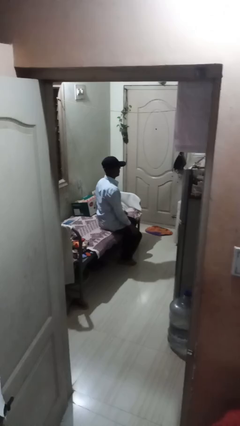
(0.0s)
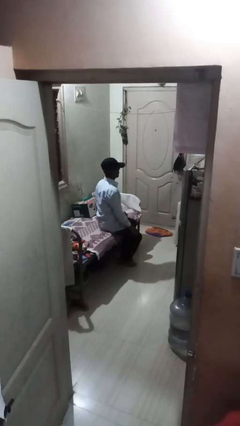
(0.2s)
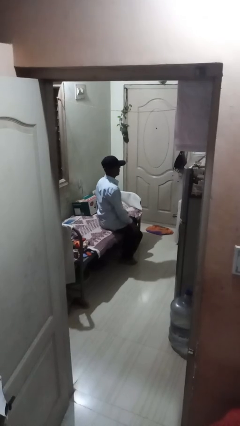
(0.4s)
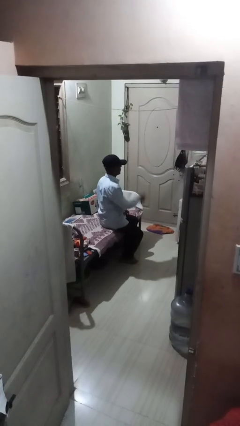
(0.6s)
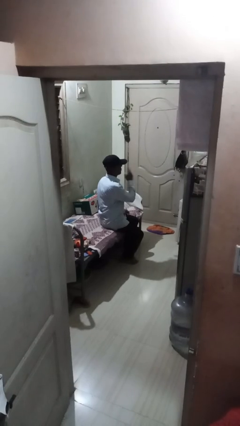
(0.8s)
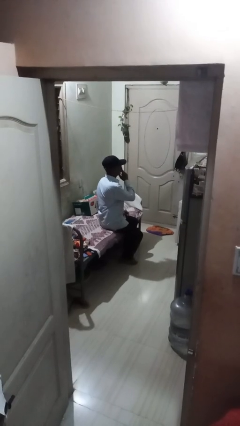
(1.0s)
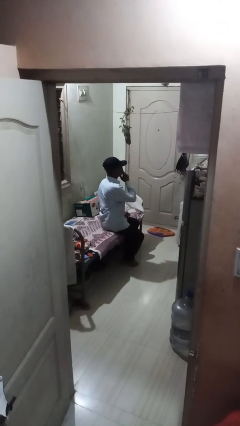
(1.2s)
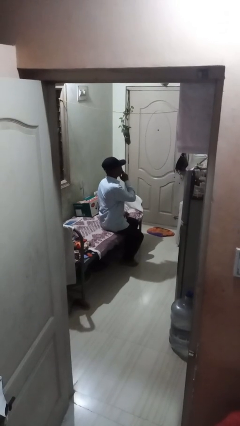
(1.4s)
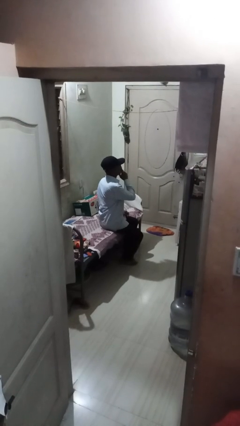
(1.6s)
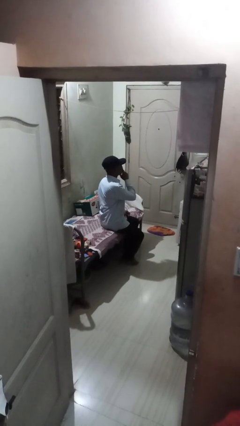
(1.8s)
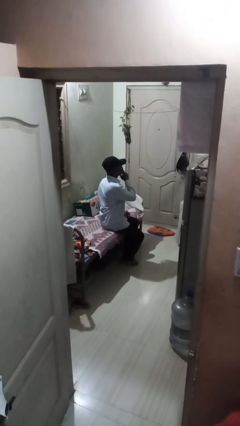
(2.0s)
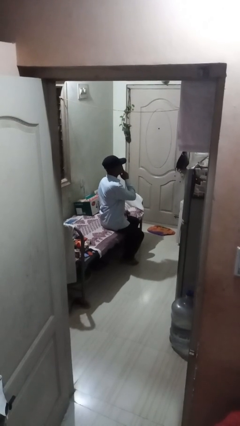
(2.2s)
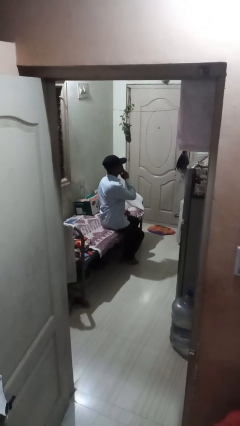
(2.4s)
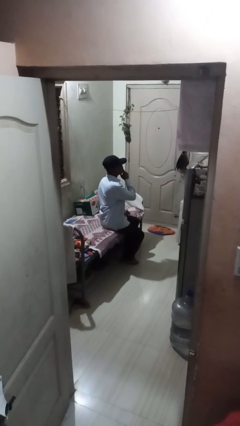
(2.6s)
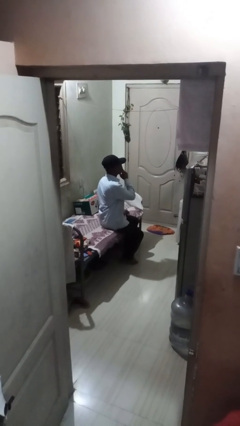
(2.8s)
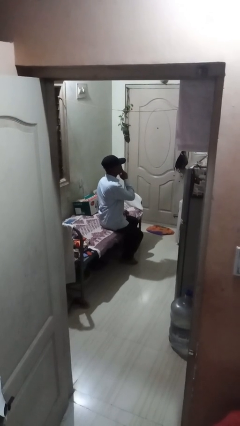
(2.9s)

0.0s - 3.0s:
person gestures be quiet

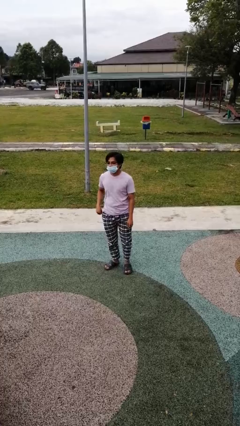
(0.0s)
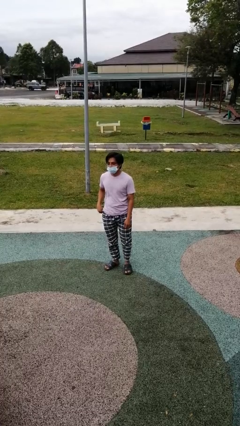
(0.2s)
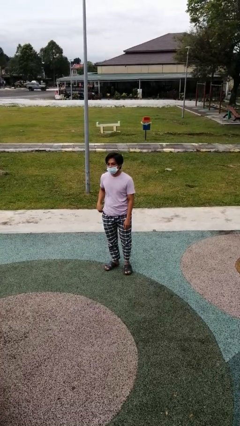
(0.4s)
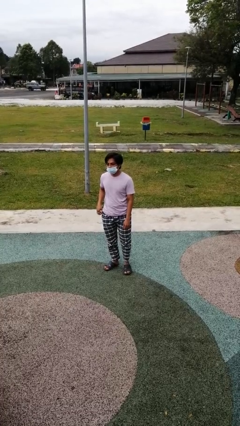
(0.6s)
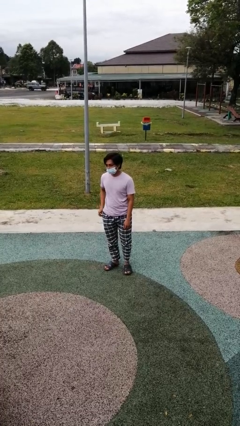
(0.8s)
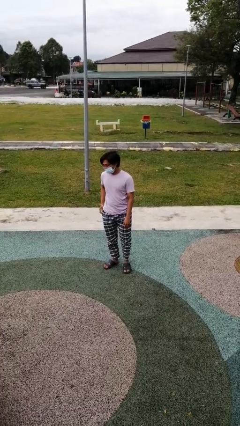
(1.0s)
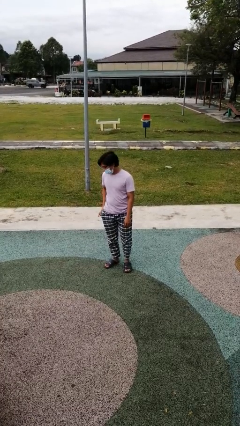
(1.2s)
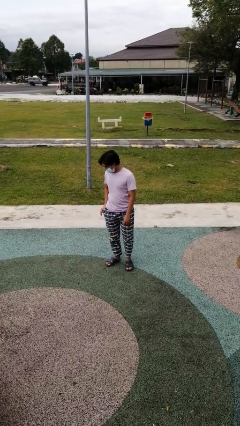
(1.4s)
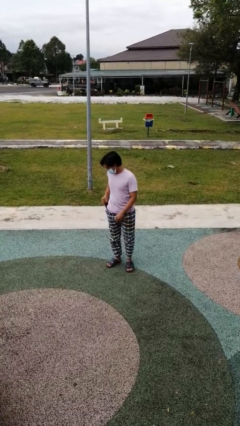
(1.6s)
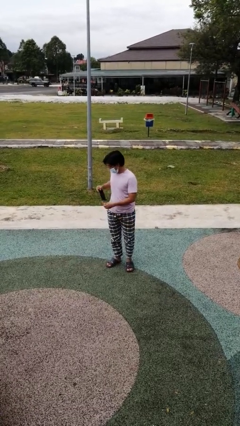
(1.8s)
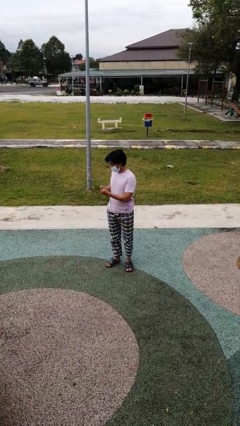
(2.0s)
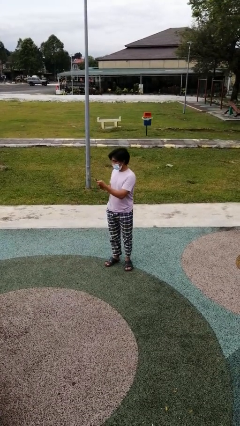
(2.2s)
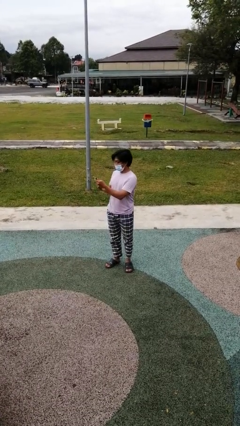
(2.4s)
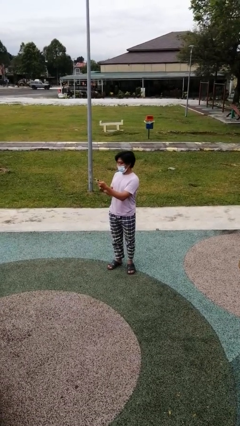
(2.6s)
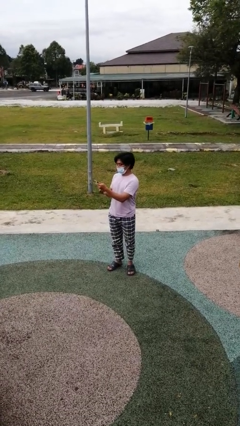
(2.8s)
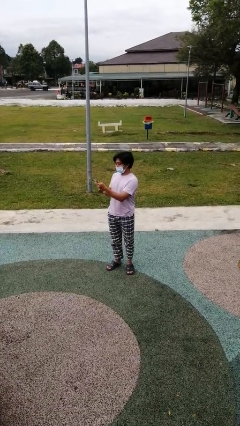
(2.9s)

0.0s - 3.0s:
person takes phone from pocket

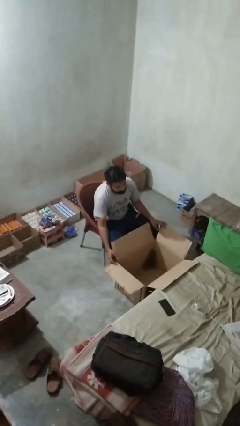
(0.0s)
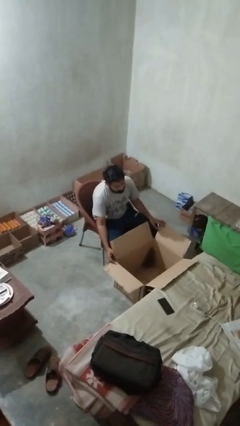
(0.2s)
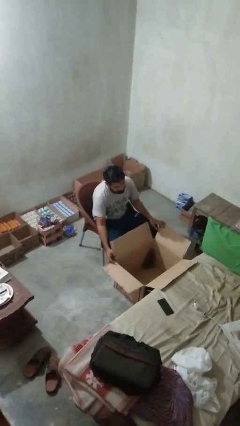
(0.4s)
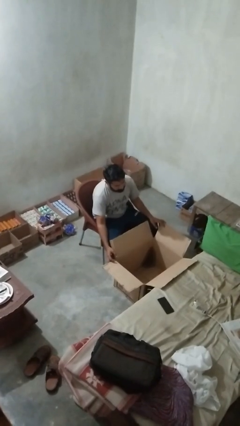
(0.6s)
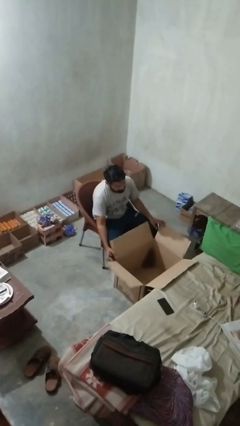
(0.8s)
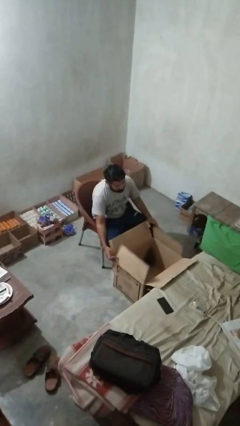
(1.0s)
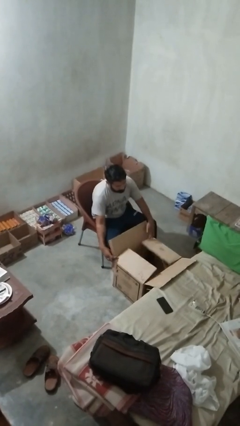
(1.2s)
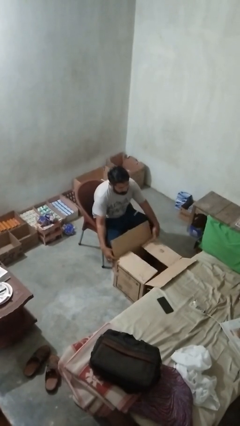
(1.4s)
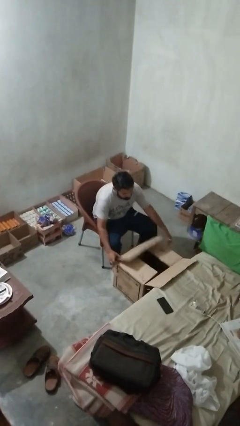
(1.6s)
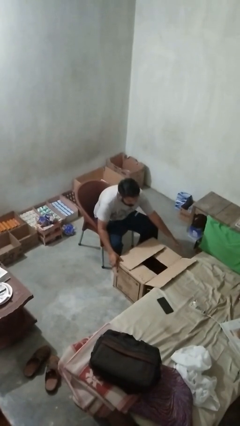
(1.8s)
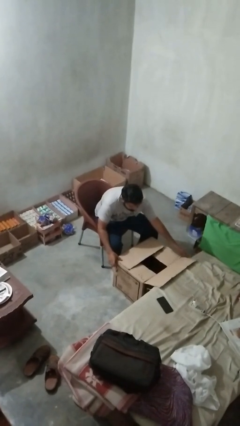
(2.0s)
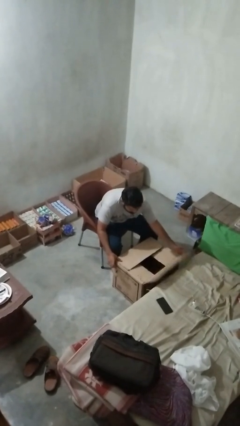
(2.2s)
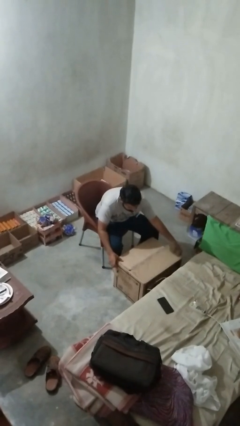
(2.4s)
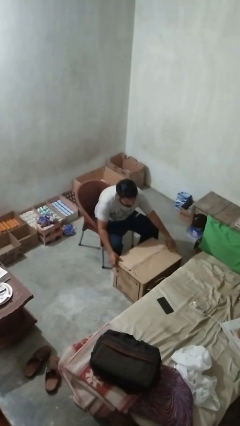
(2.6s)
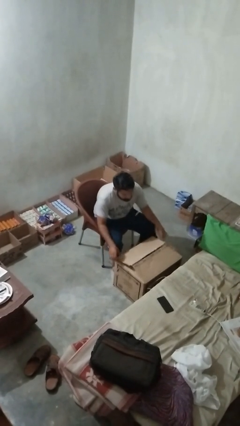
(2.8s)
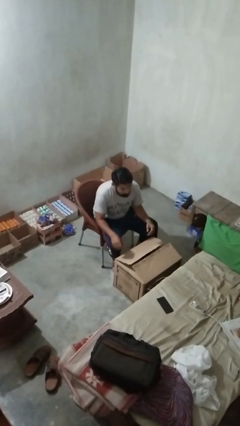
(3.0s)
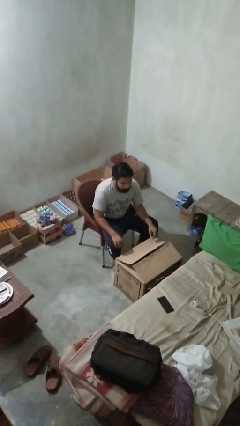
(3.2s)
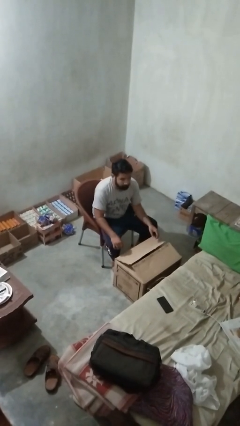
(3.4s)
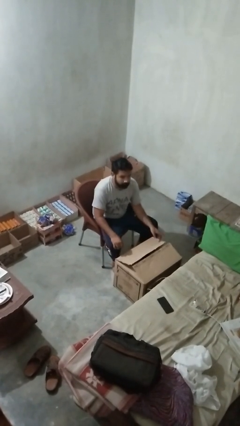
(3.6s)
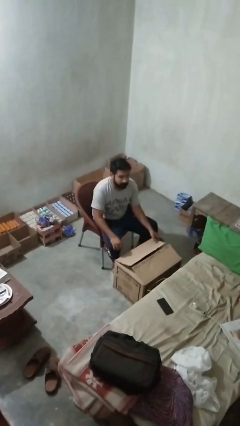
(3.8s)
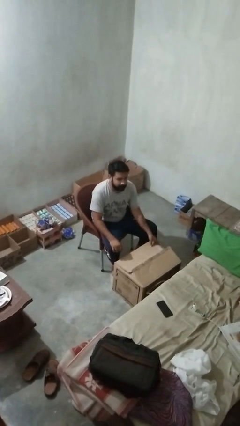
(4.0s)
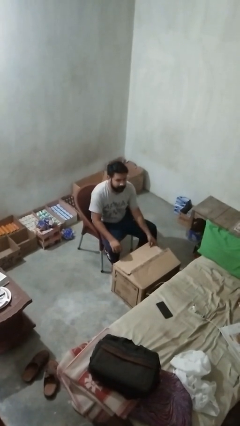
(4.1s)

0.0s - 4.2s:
person closes box

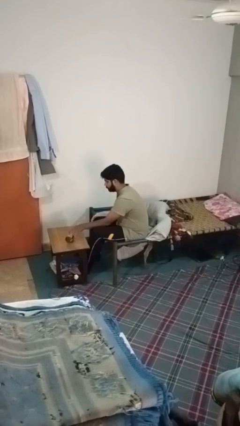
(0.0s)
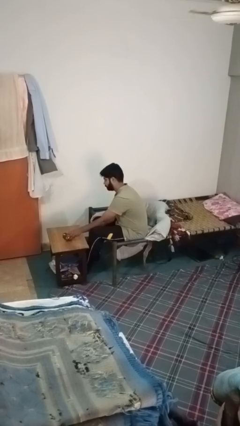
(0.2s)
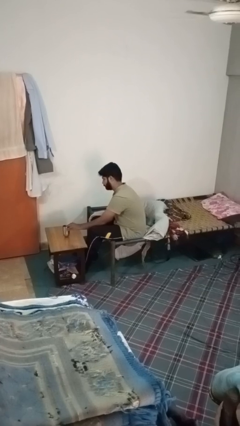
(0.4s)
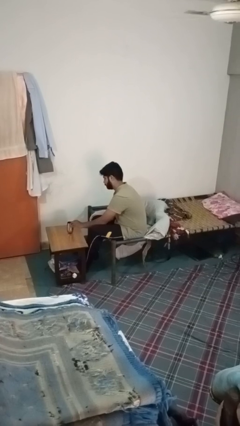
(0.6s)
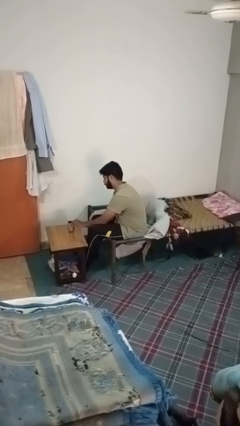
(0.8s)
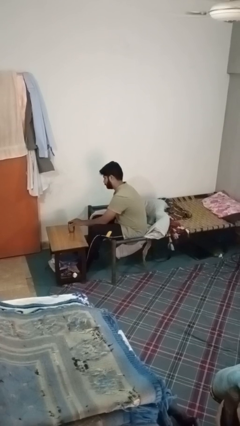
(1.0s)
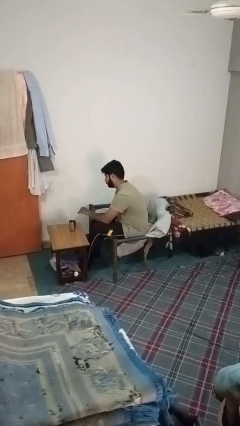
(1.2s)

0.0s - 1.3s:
person sets upright glass

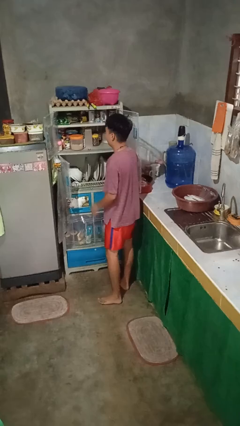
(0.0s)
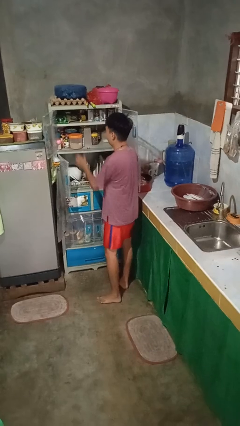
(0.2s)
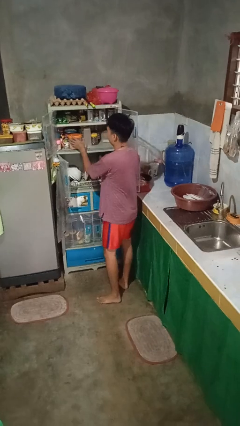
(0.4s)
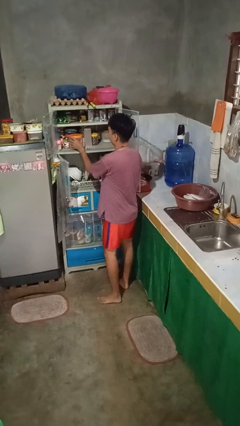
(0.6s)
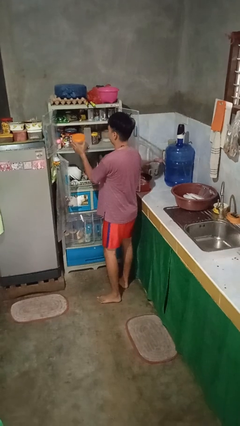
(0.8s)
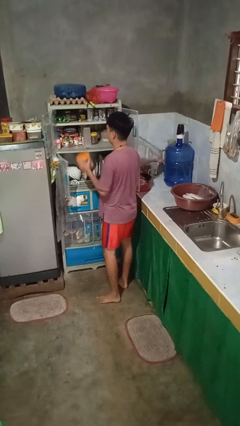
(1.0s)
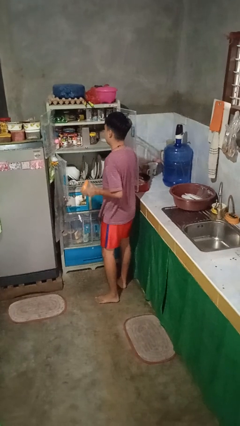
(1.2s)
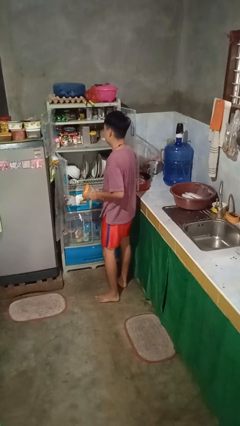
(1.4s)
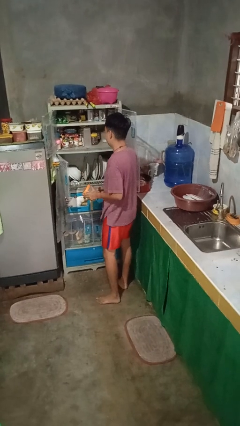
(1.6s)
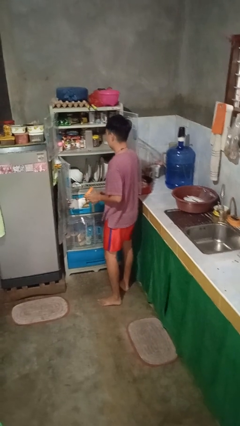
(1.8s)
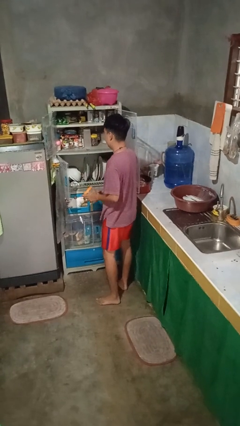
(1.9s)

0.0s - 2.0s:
person takes object from cabinet

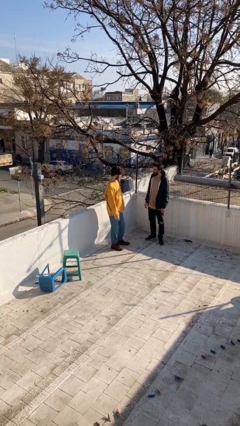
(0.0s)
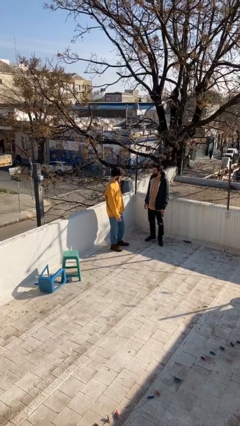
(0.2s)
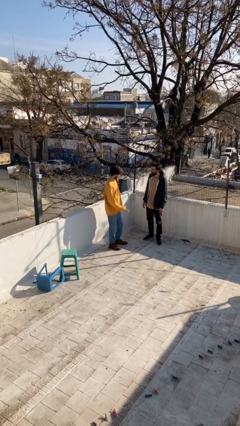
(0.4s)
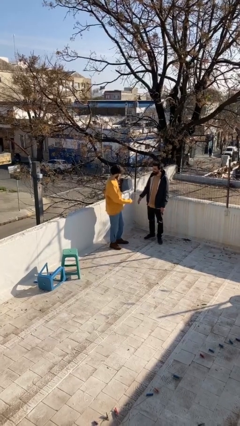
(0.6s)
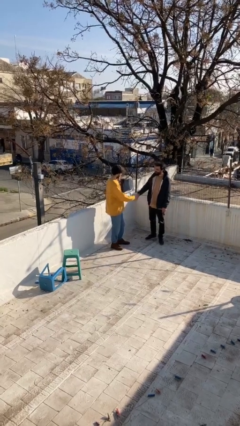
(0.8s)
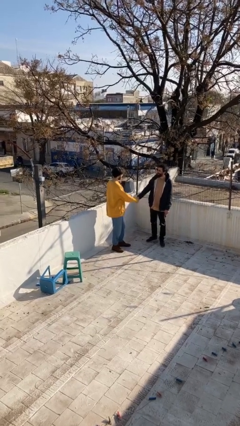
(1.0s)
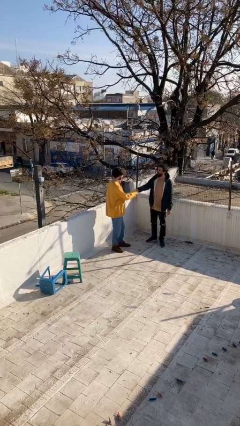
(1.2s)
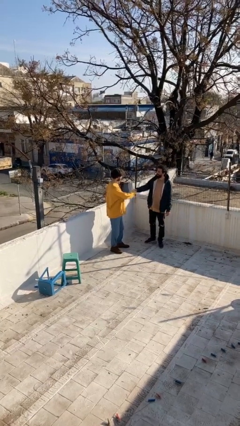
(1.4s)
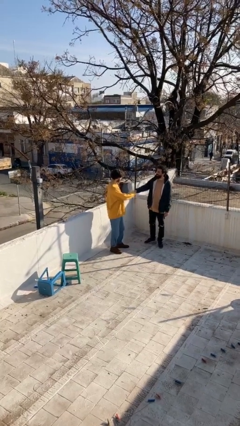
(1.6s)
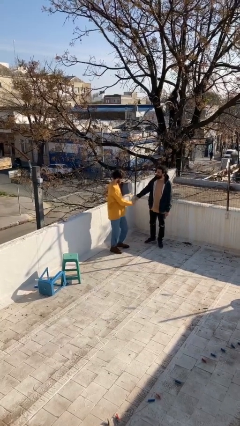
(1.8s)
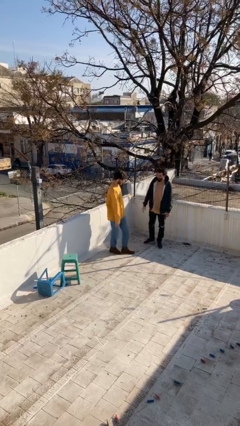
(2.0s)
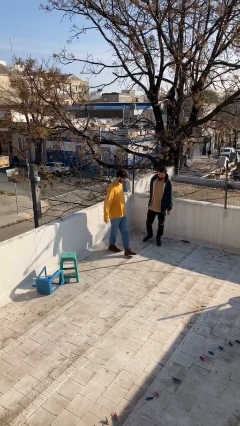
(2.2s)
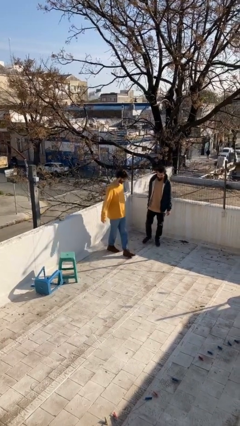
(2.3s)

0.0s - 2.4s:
person shakes hand

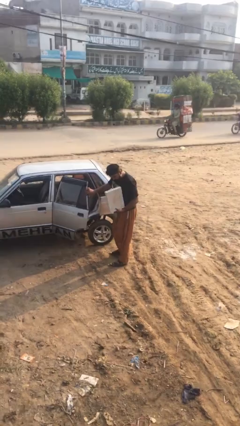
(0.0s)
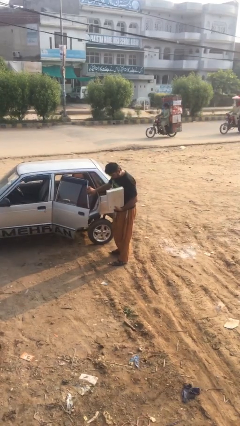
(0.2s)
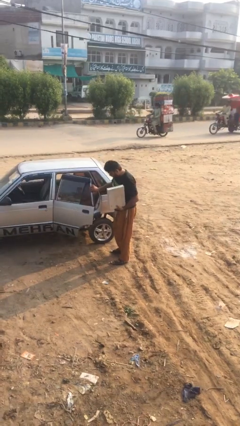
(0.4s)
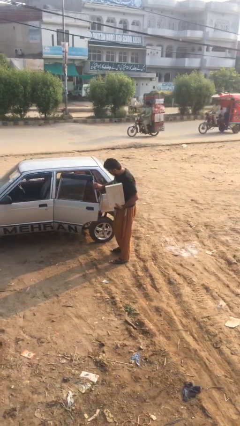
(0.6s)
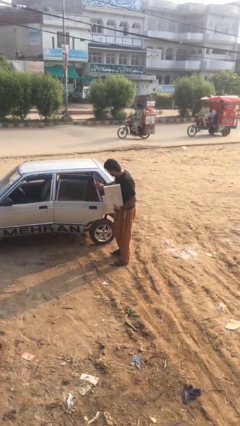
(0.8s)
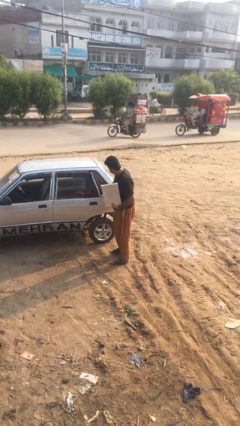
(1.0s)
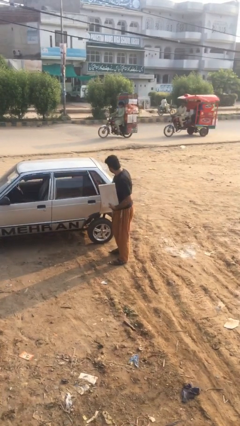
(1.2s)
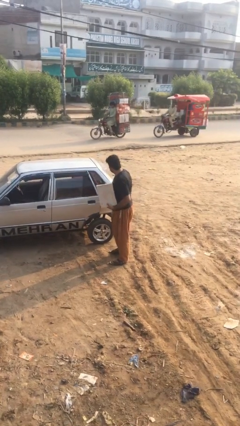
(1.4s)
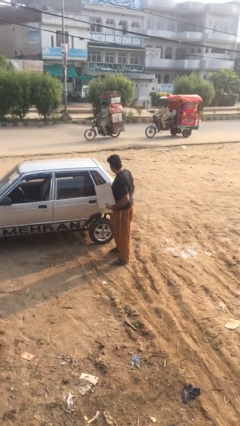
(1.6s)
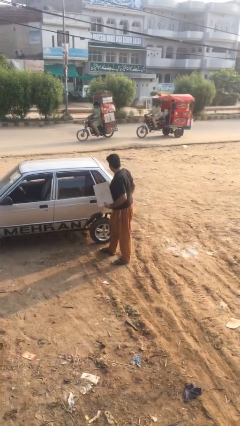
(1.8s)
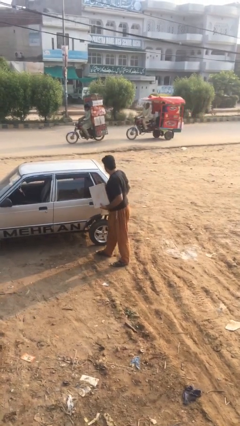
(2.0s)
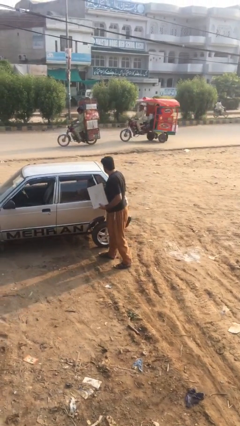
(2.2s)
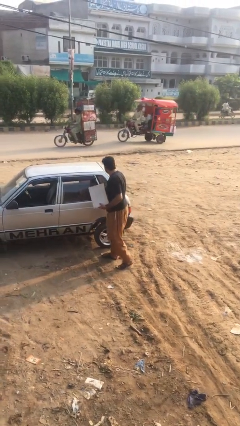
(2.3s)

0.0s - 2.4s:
person closes car door
